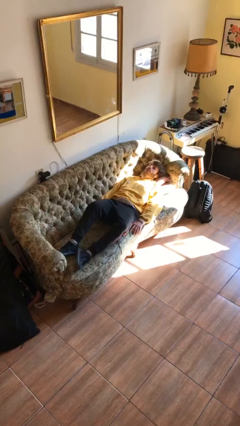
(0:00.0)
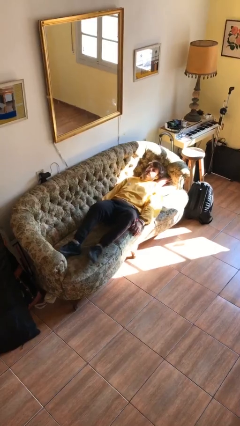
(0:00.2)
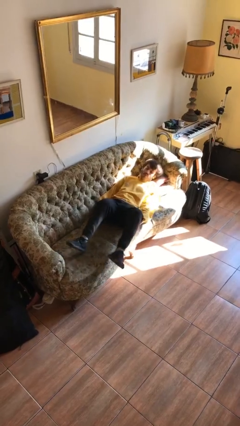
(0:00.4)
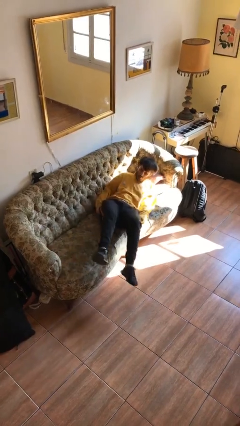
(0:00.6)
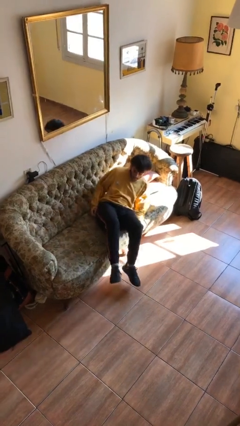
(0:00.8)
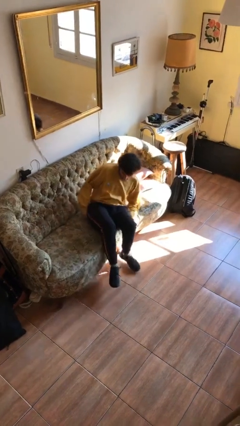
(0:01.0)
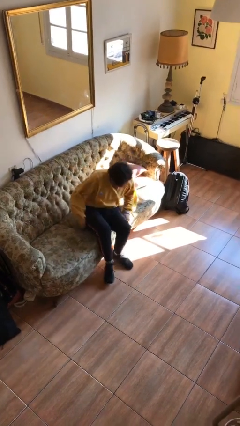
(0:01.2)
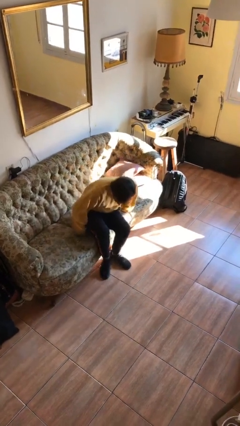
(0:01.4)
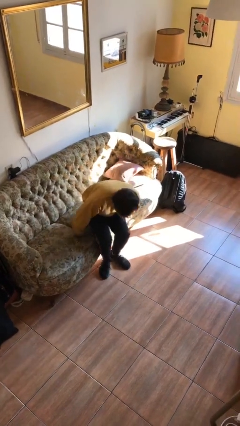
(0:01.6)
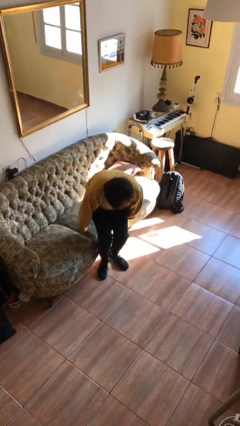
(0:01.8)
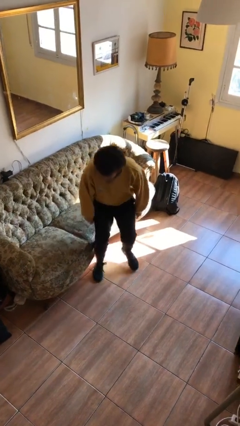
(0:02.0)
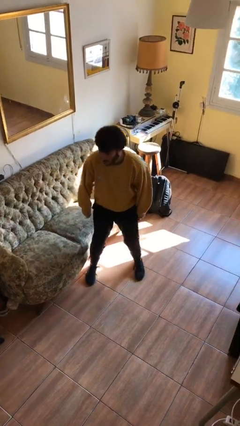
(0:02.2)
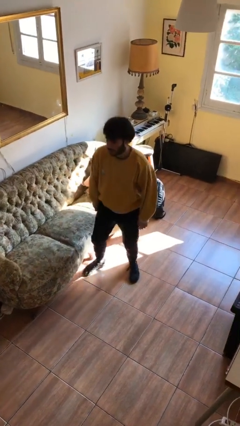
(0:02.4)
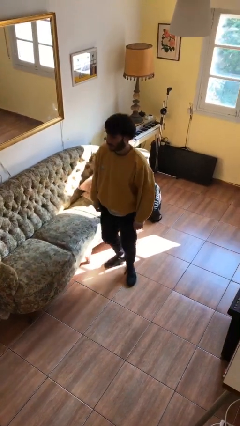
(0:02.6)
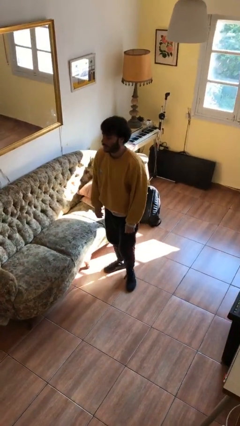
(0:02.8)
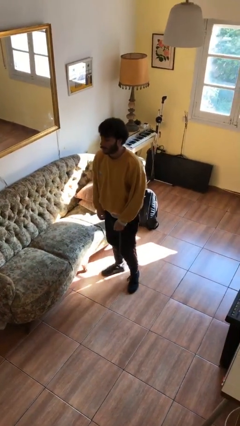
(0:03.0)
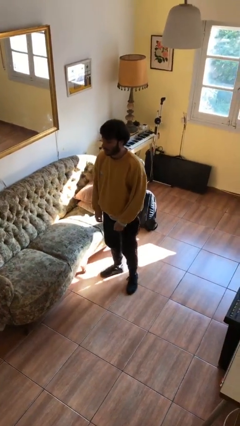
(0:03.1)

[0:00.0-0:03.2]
person stands up

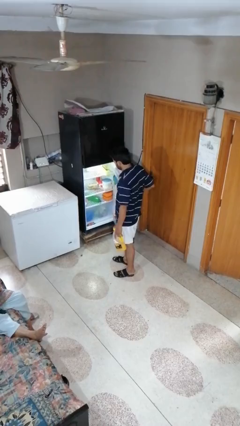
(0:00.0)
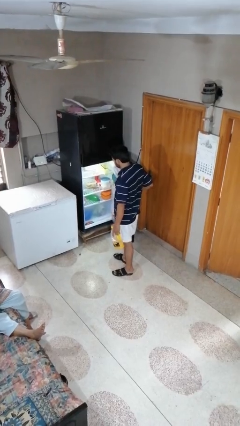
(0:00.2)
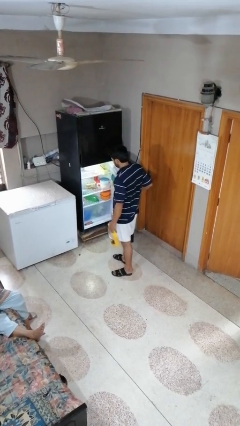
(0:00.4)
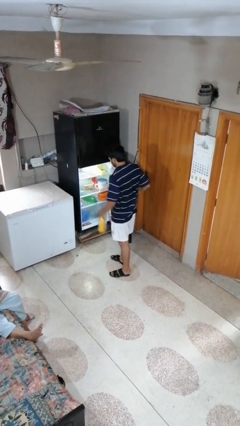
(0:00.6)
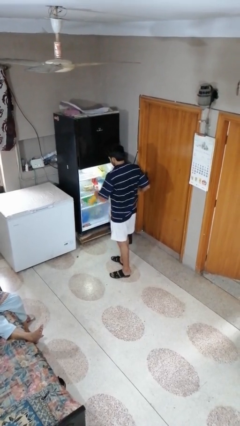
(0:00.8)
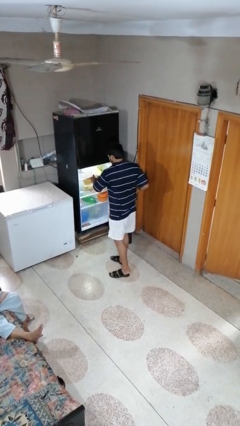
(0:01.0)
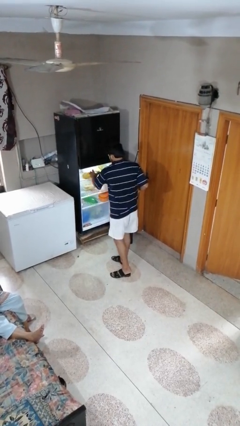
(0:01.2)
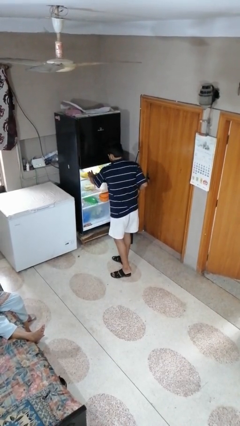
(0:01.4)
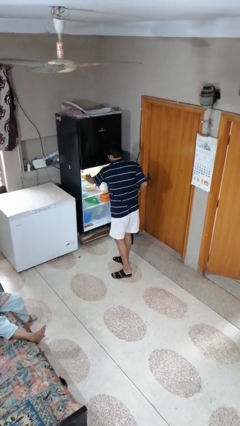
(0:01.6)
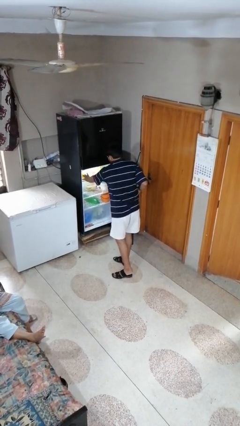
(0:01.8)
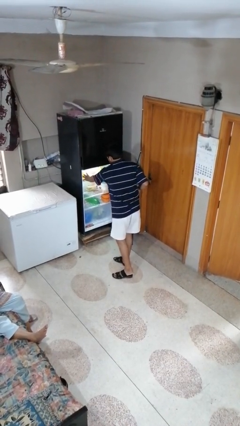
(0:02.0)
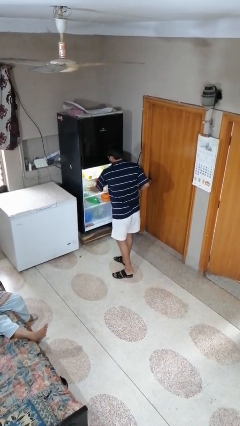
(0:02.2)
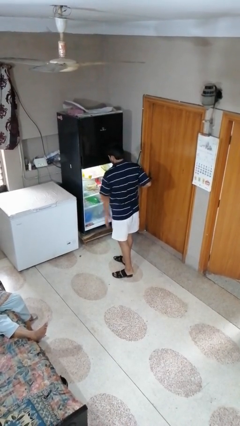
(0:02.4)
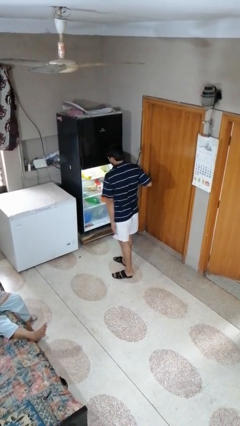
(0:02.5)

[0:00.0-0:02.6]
person puts object into refrigerator

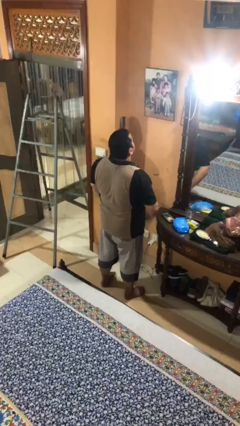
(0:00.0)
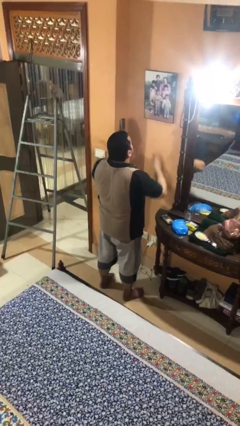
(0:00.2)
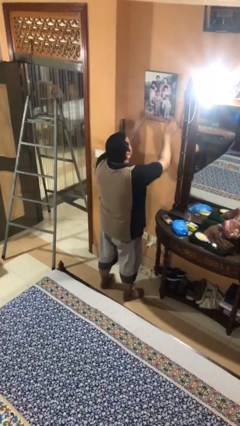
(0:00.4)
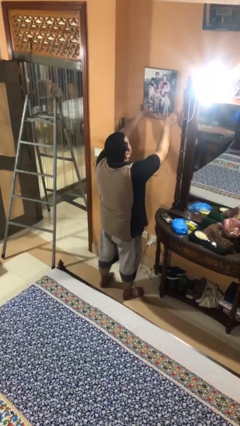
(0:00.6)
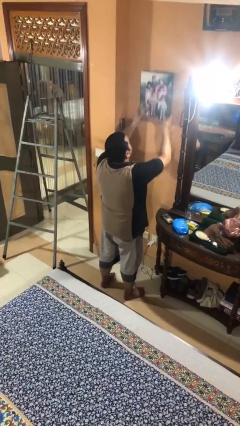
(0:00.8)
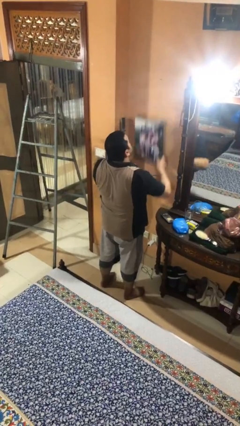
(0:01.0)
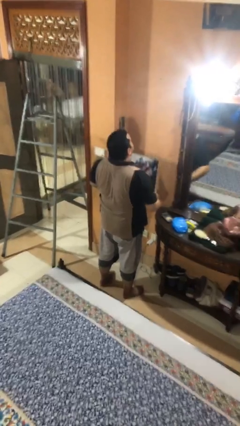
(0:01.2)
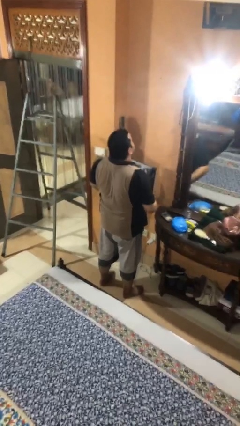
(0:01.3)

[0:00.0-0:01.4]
person takes down picture frame

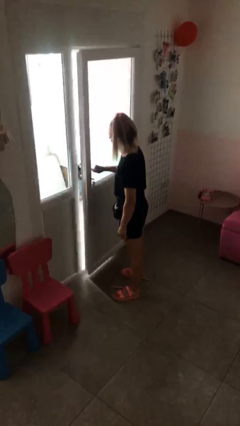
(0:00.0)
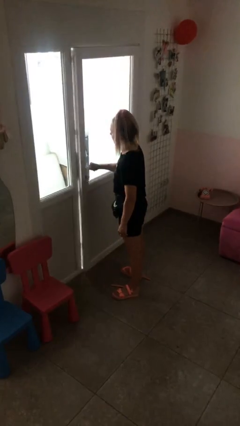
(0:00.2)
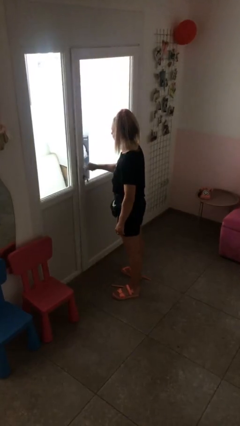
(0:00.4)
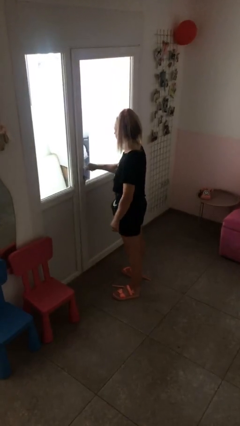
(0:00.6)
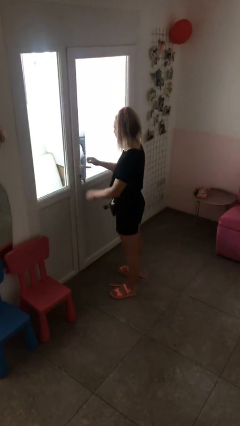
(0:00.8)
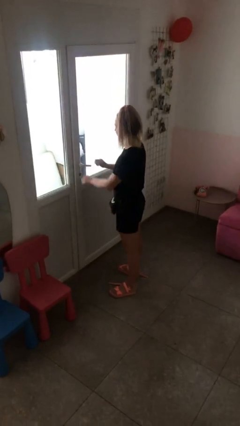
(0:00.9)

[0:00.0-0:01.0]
person closes facility door

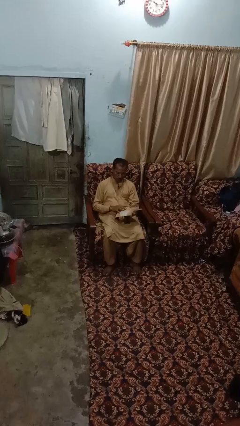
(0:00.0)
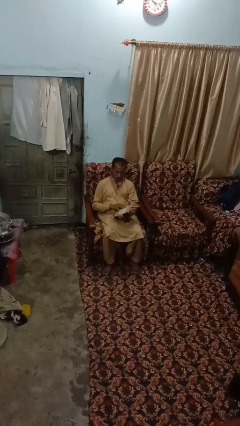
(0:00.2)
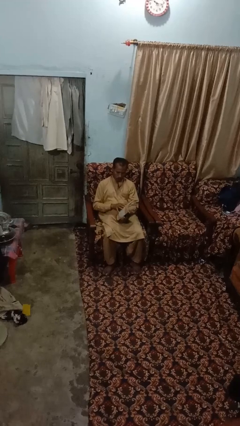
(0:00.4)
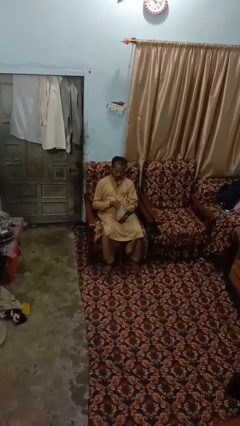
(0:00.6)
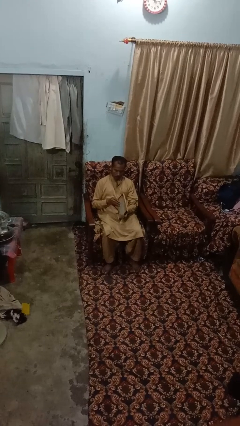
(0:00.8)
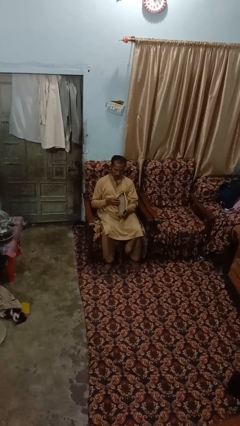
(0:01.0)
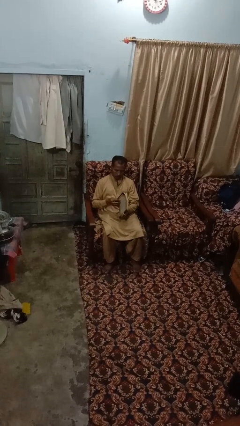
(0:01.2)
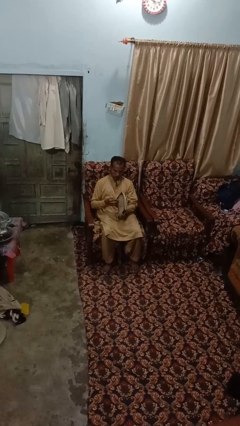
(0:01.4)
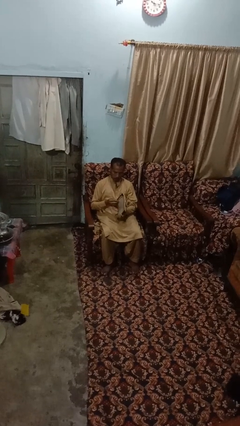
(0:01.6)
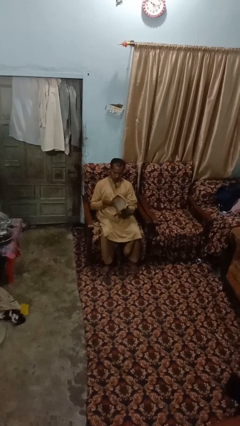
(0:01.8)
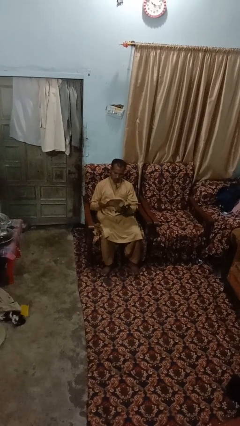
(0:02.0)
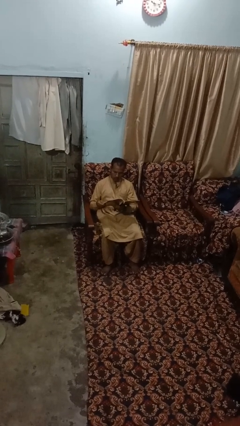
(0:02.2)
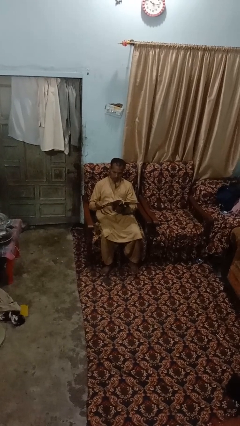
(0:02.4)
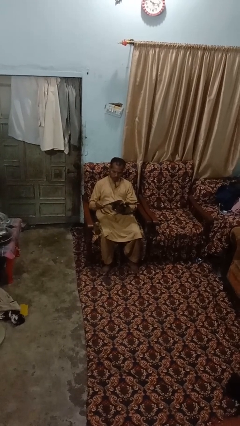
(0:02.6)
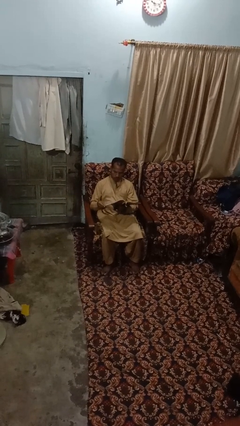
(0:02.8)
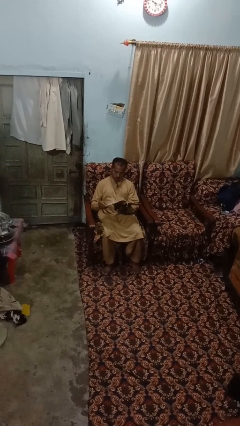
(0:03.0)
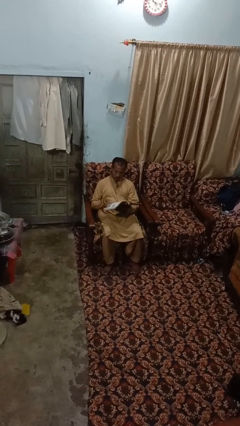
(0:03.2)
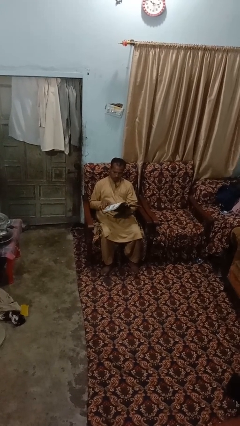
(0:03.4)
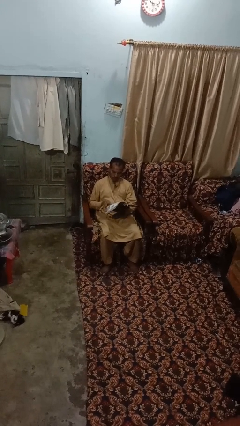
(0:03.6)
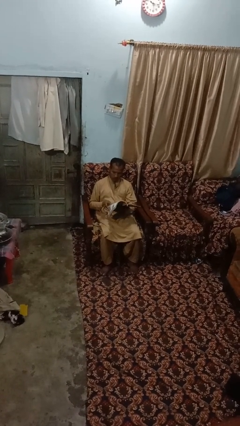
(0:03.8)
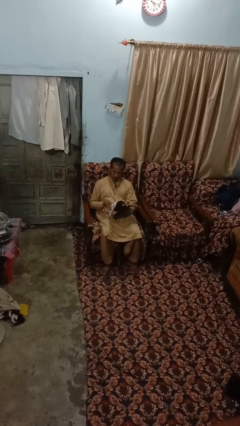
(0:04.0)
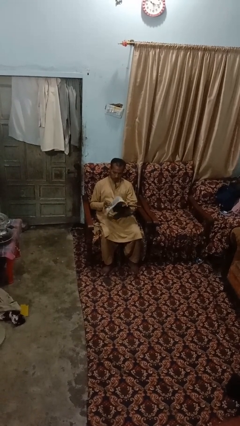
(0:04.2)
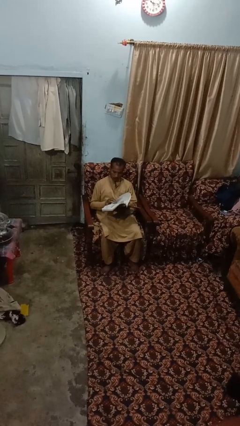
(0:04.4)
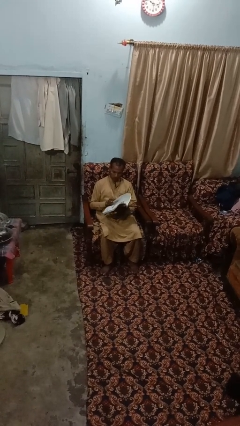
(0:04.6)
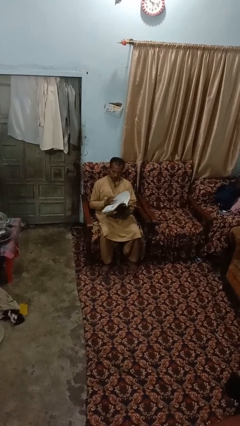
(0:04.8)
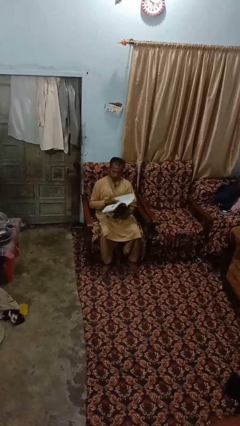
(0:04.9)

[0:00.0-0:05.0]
person reads book

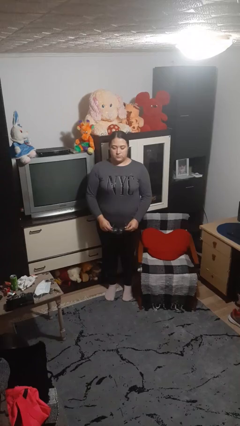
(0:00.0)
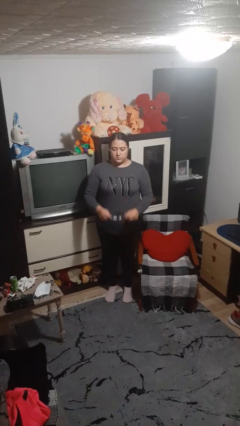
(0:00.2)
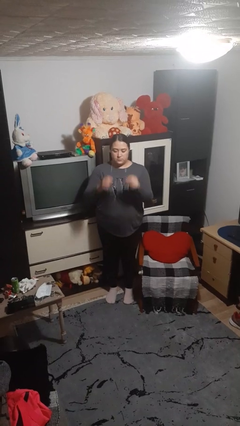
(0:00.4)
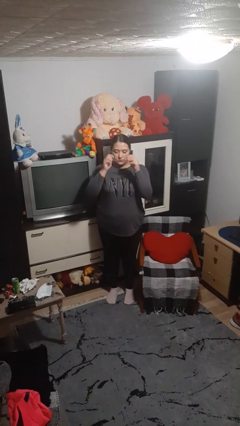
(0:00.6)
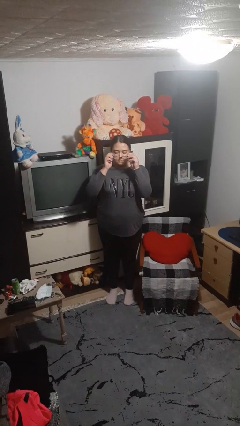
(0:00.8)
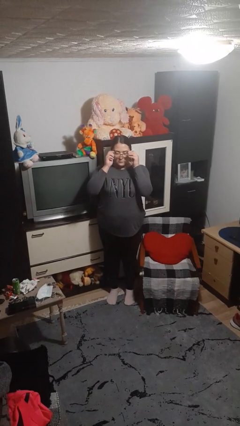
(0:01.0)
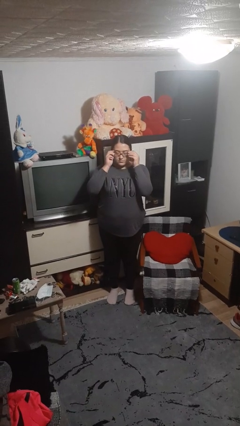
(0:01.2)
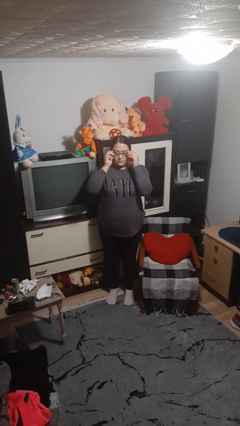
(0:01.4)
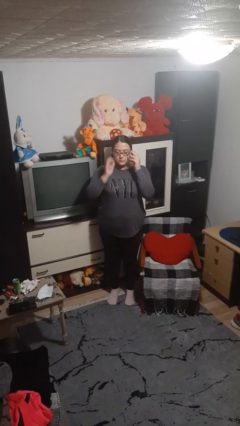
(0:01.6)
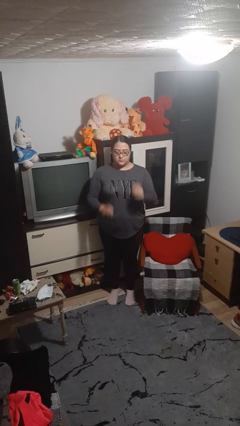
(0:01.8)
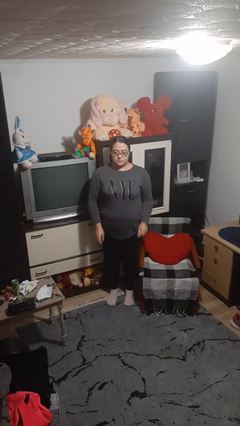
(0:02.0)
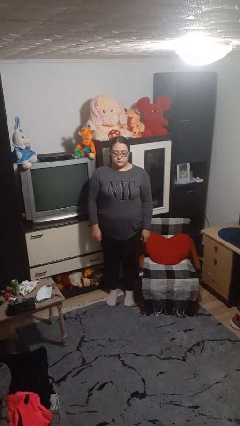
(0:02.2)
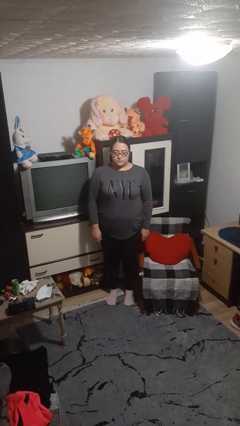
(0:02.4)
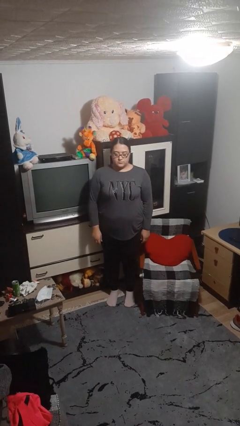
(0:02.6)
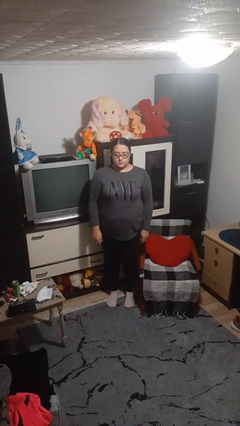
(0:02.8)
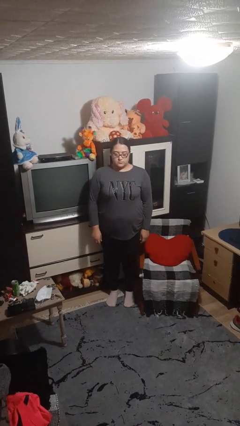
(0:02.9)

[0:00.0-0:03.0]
person puts on glasses

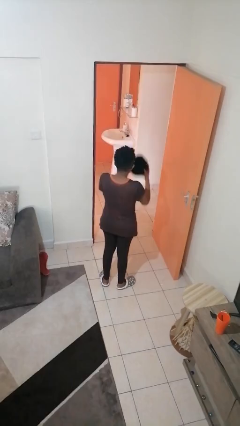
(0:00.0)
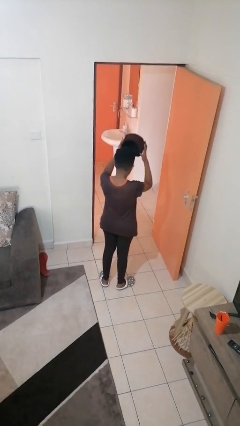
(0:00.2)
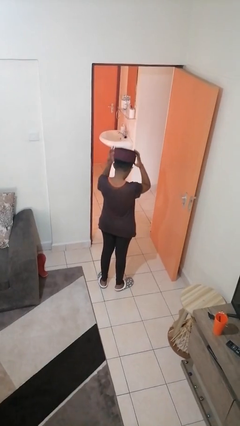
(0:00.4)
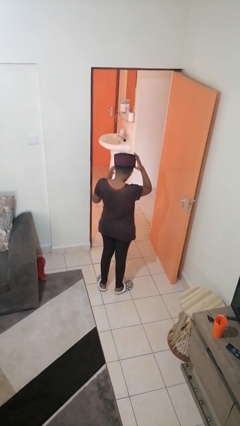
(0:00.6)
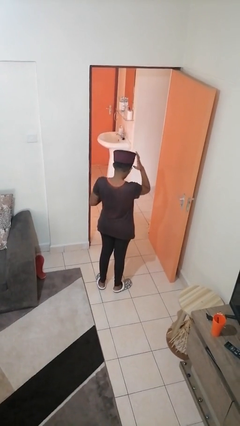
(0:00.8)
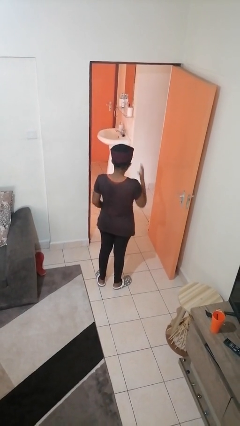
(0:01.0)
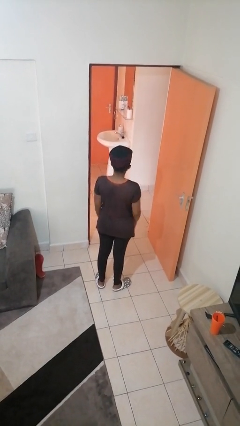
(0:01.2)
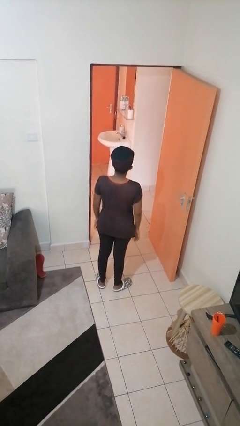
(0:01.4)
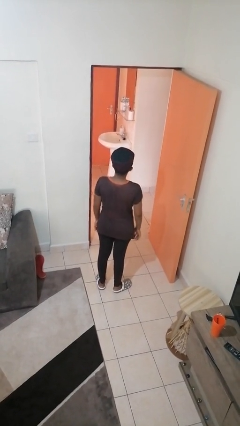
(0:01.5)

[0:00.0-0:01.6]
person puts on hat
